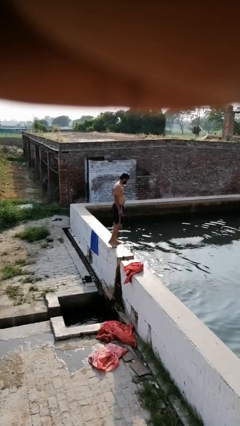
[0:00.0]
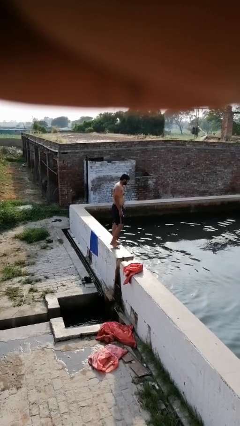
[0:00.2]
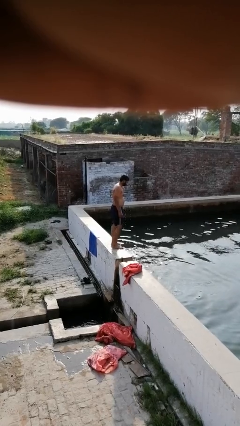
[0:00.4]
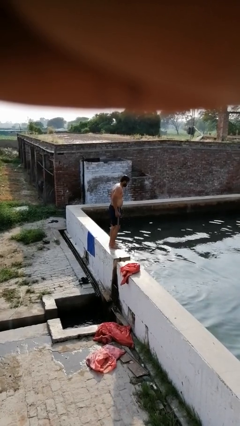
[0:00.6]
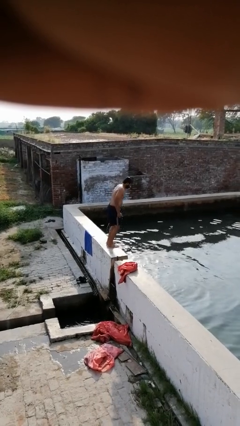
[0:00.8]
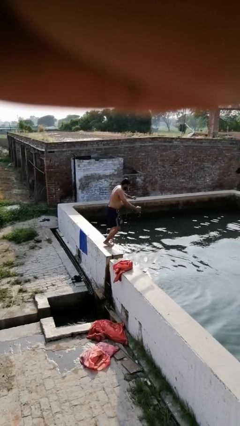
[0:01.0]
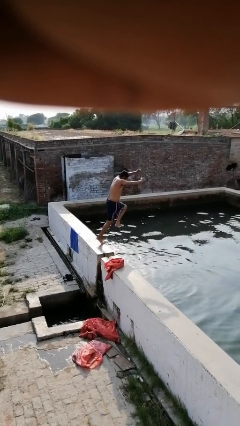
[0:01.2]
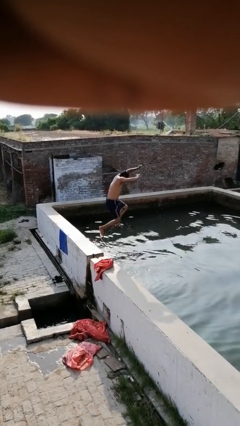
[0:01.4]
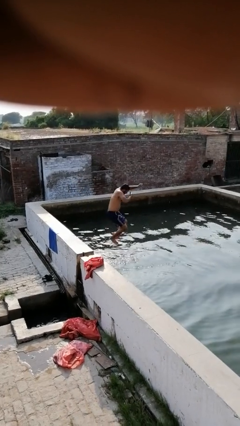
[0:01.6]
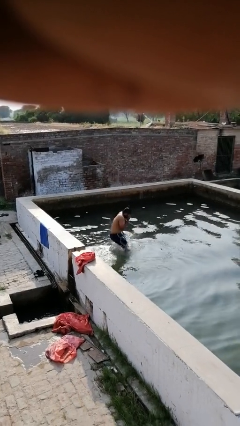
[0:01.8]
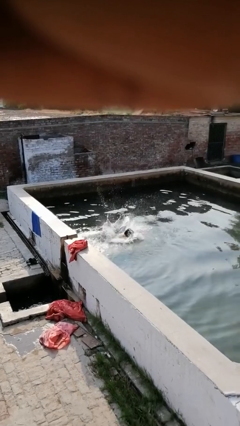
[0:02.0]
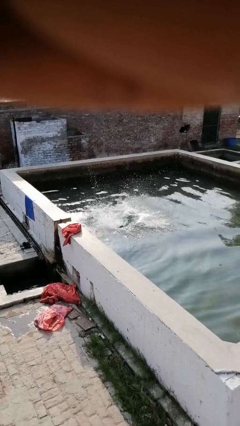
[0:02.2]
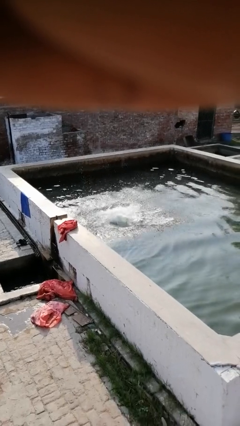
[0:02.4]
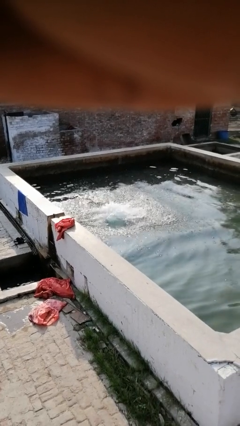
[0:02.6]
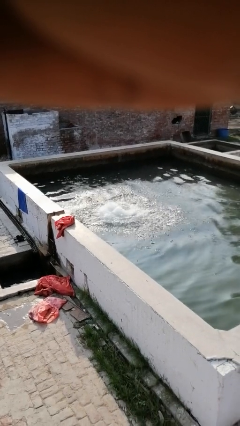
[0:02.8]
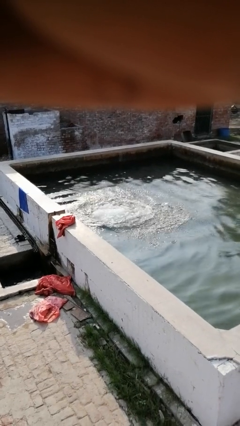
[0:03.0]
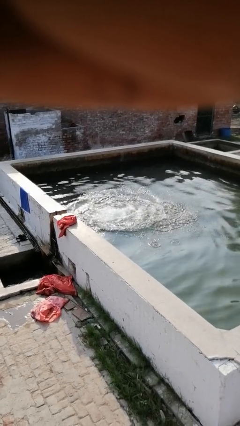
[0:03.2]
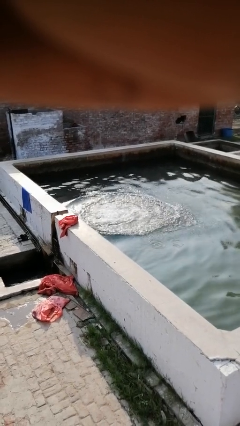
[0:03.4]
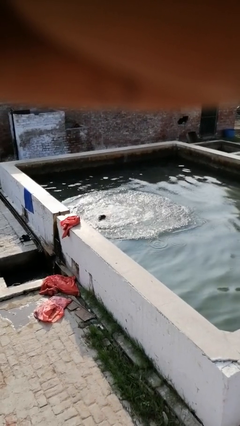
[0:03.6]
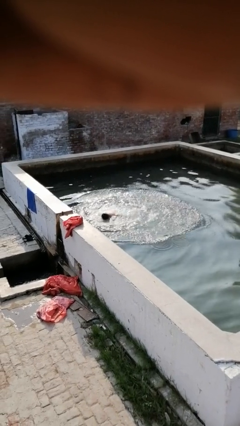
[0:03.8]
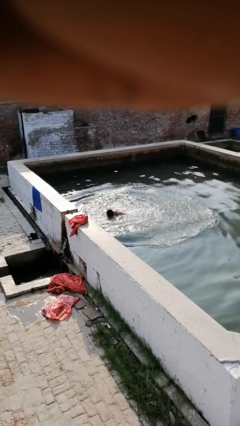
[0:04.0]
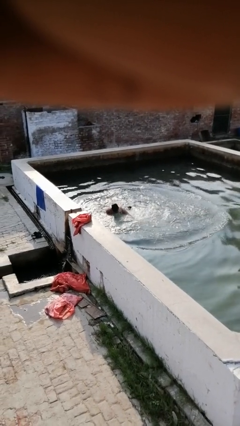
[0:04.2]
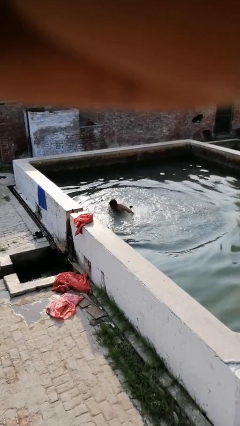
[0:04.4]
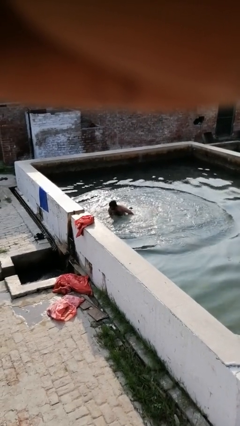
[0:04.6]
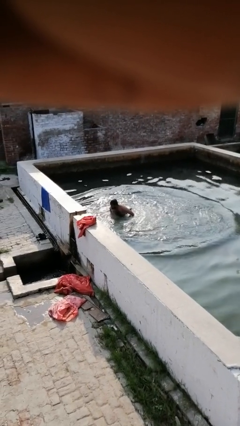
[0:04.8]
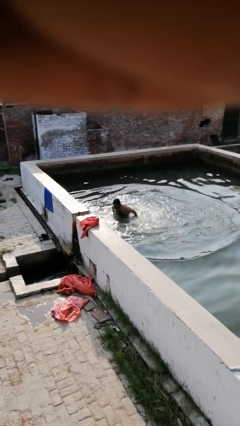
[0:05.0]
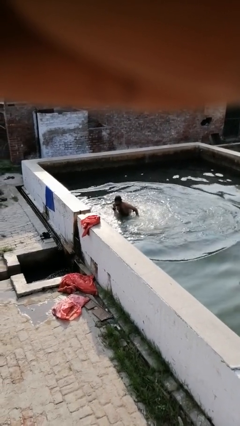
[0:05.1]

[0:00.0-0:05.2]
person jumps into pool

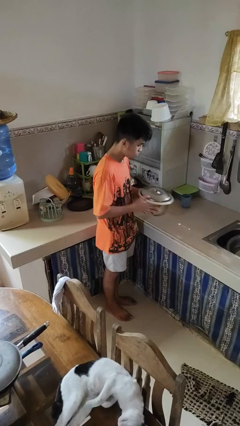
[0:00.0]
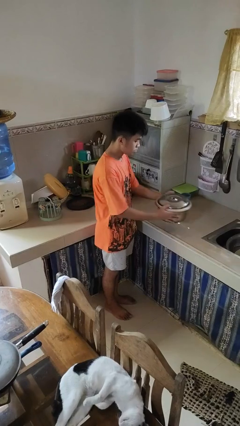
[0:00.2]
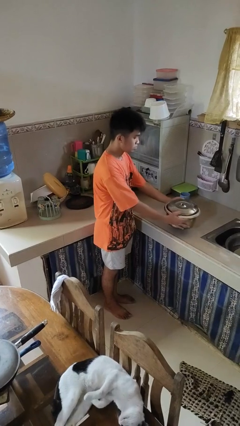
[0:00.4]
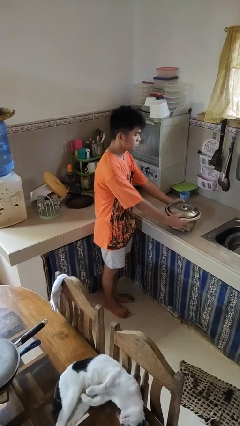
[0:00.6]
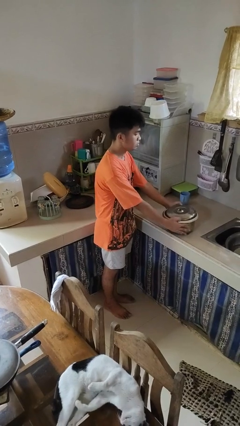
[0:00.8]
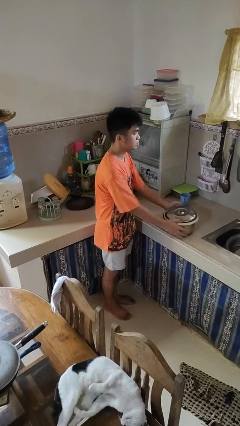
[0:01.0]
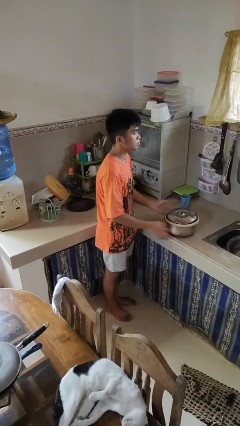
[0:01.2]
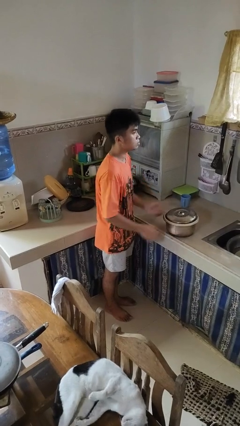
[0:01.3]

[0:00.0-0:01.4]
person puts down object on countertop

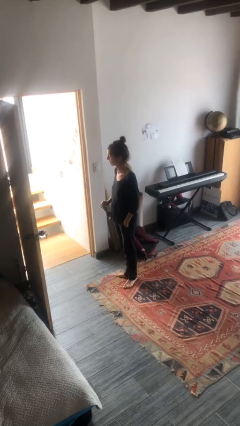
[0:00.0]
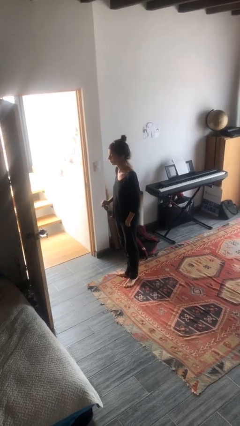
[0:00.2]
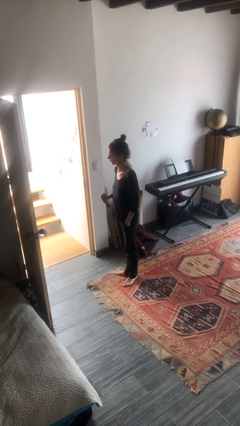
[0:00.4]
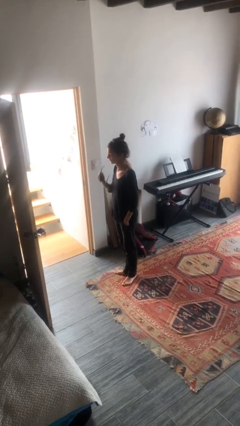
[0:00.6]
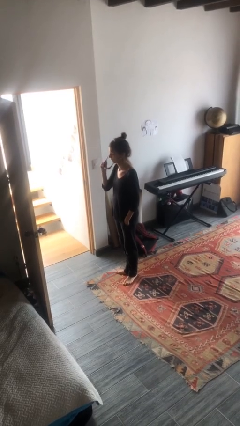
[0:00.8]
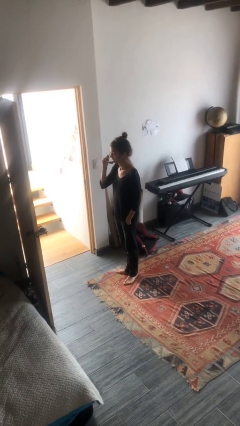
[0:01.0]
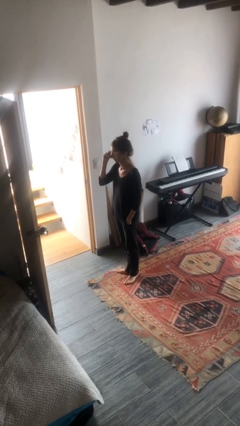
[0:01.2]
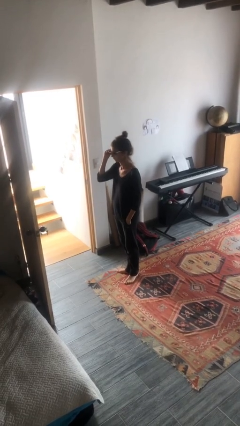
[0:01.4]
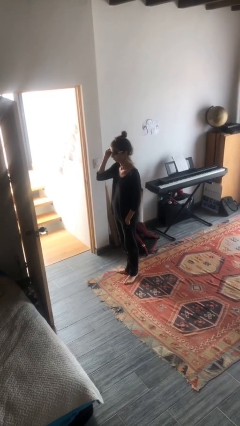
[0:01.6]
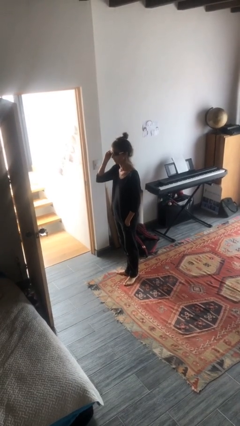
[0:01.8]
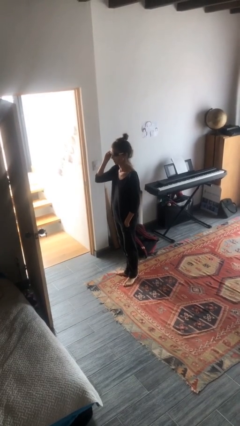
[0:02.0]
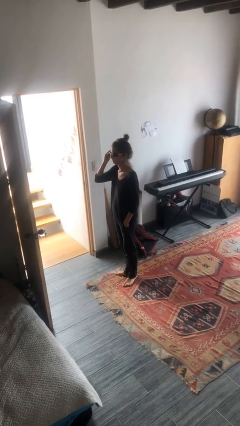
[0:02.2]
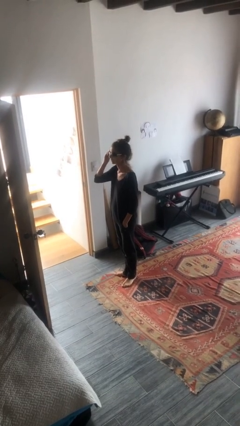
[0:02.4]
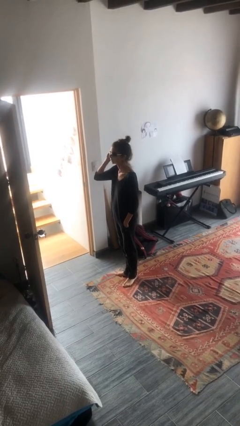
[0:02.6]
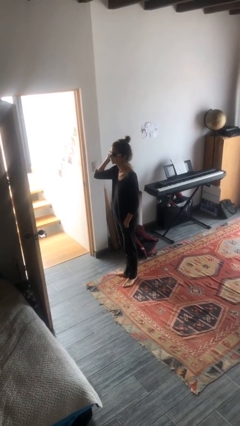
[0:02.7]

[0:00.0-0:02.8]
person puts on sunglasses

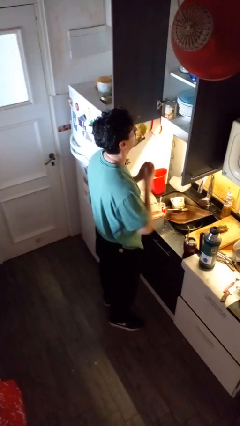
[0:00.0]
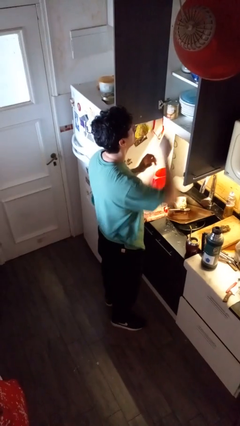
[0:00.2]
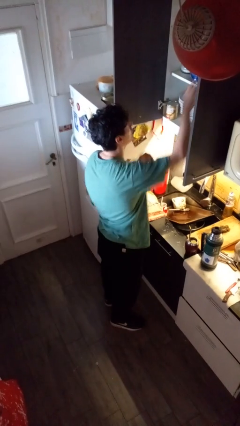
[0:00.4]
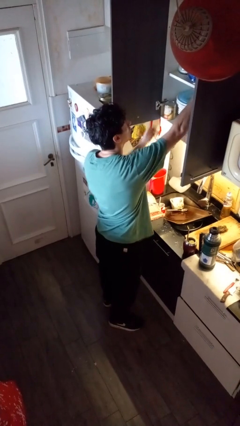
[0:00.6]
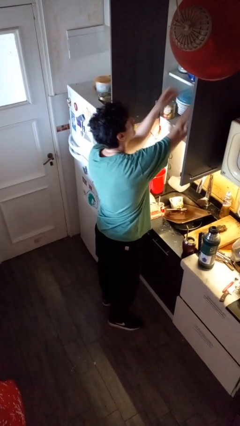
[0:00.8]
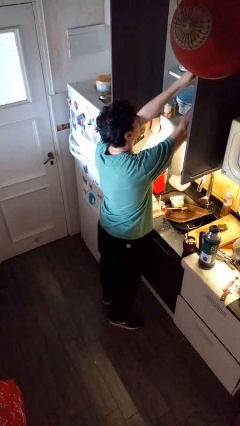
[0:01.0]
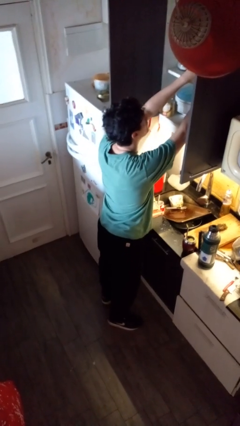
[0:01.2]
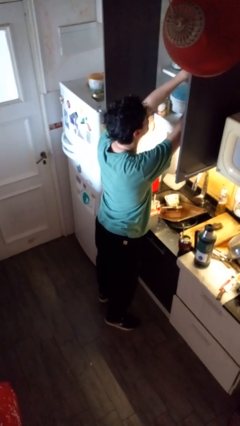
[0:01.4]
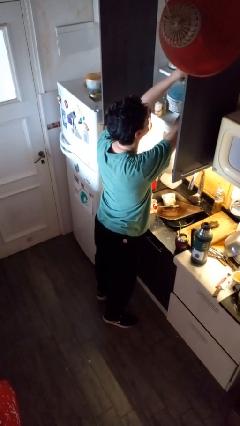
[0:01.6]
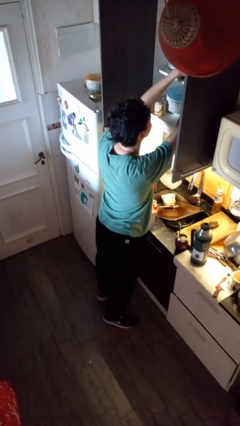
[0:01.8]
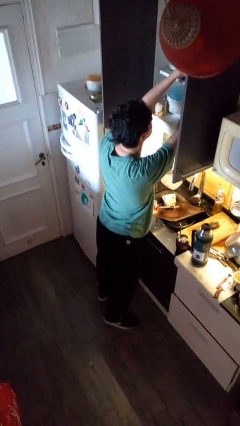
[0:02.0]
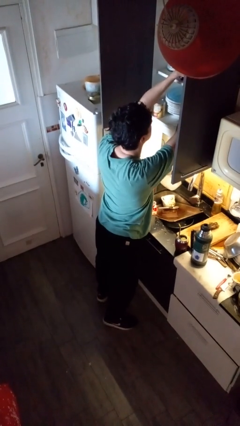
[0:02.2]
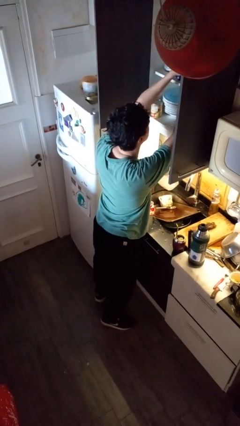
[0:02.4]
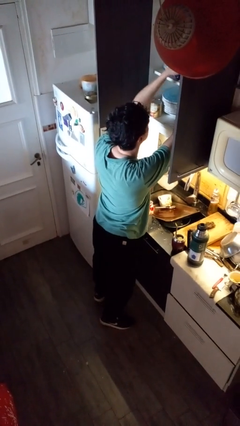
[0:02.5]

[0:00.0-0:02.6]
person searches in kitchen drawer

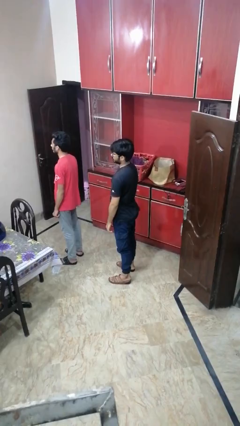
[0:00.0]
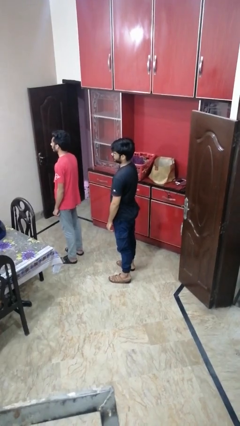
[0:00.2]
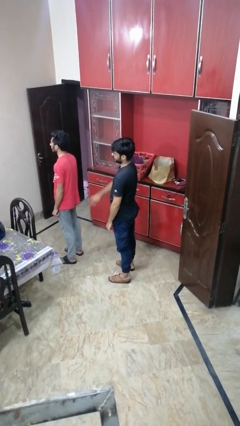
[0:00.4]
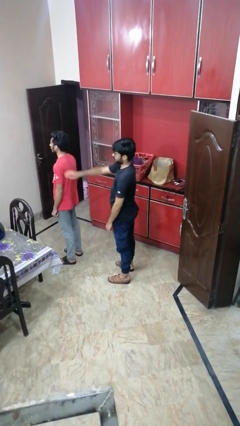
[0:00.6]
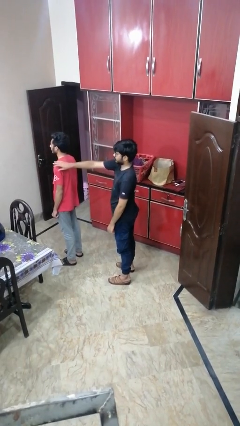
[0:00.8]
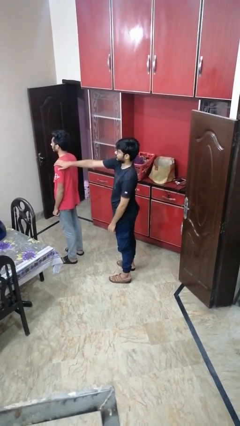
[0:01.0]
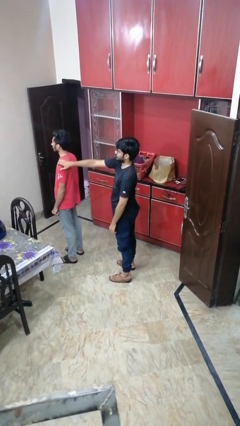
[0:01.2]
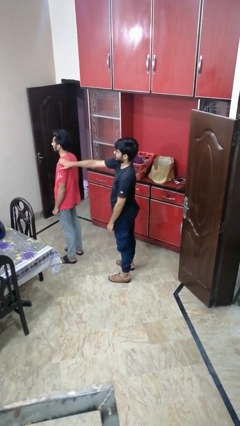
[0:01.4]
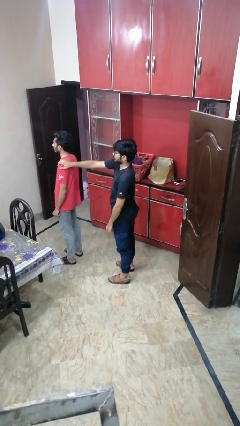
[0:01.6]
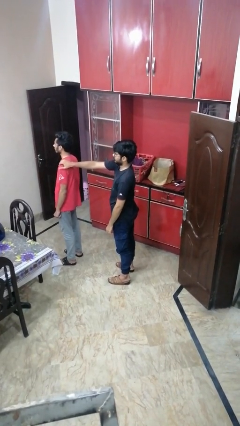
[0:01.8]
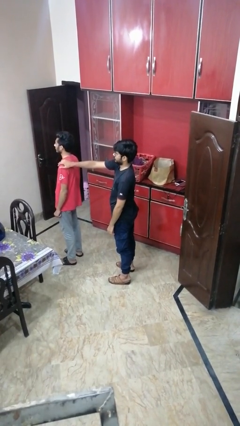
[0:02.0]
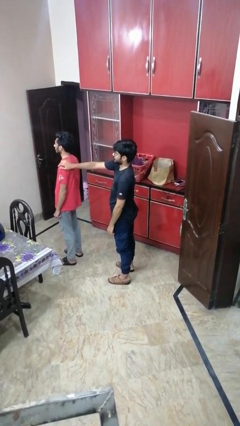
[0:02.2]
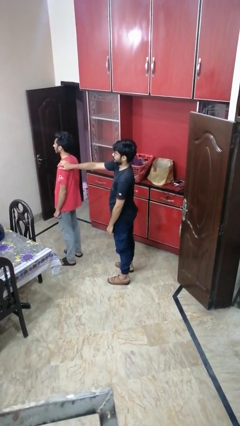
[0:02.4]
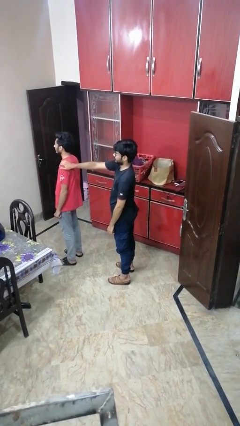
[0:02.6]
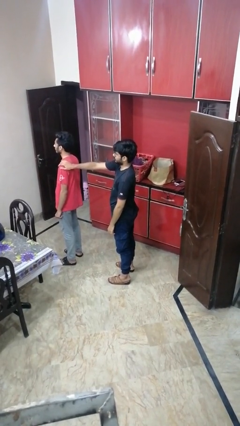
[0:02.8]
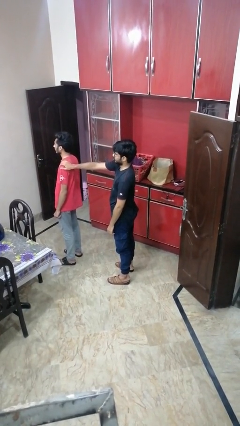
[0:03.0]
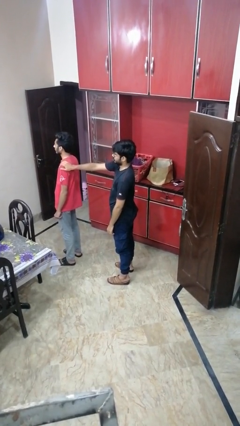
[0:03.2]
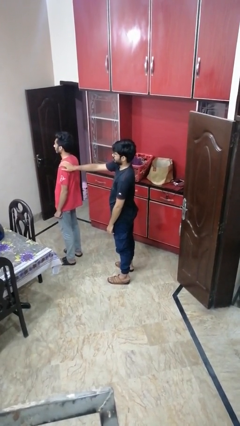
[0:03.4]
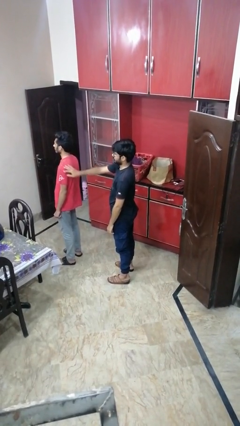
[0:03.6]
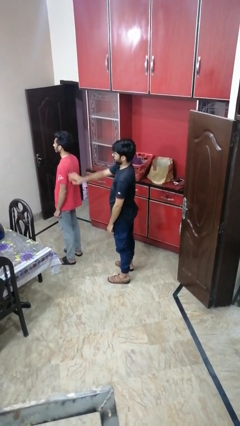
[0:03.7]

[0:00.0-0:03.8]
person touches back of person

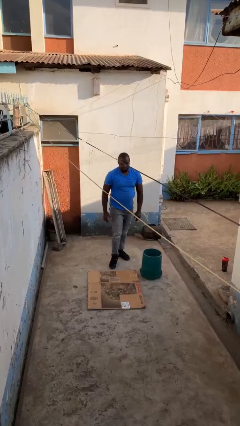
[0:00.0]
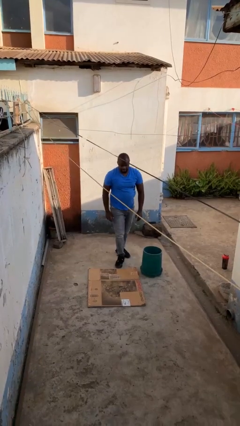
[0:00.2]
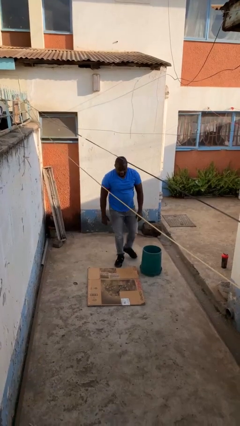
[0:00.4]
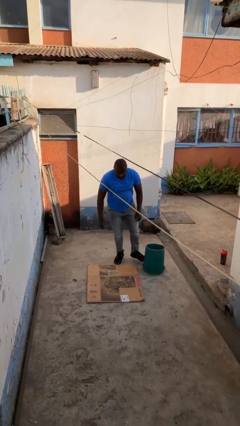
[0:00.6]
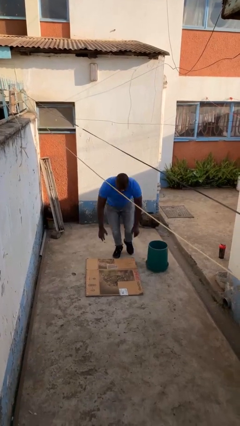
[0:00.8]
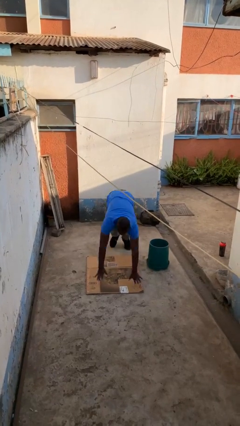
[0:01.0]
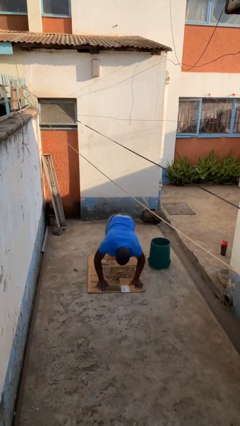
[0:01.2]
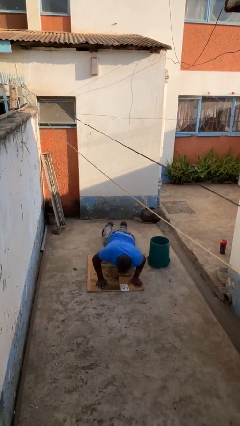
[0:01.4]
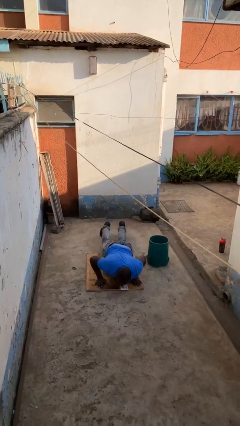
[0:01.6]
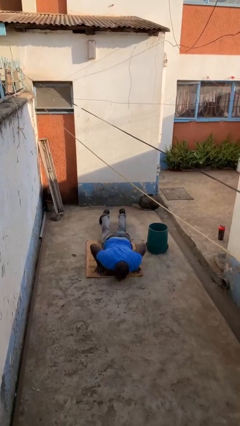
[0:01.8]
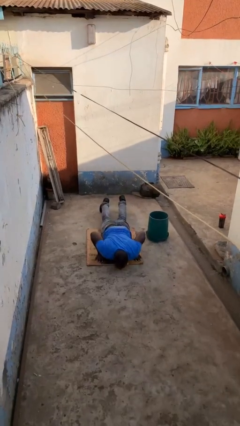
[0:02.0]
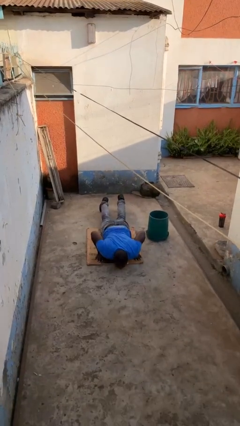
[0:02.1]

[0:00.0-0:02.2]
person trips on object on floor
